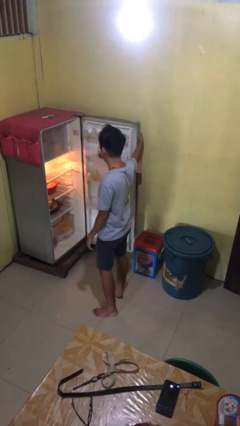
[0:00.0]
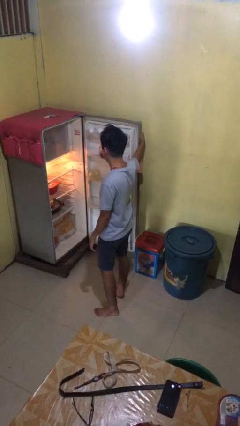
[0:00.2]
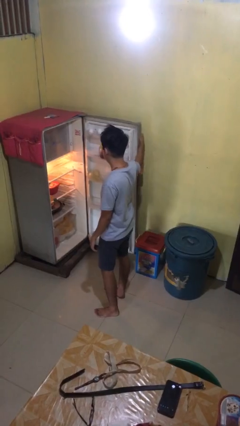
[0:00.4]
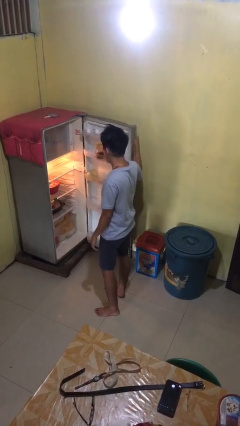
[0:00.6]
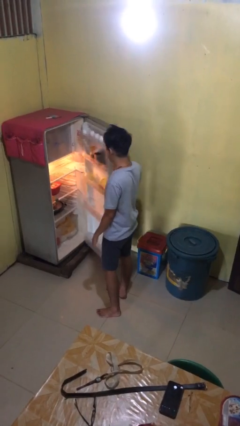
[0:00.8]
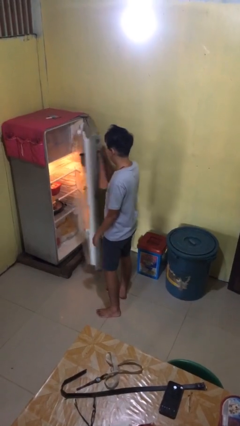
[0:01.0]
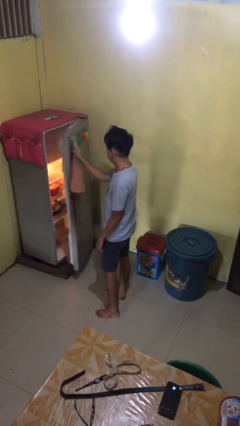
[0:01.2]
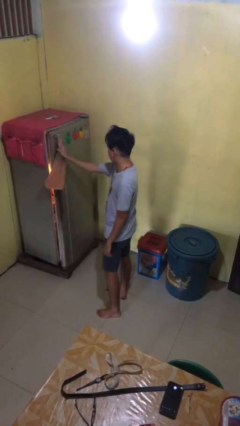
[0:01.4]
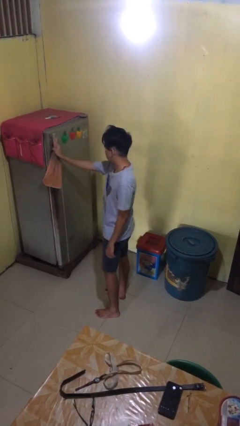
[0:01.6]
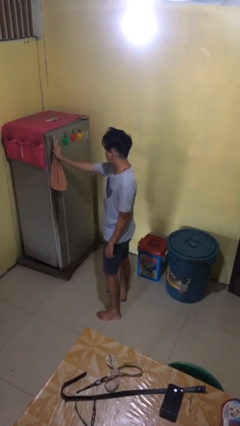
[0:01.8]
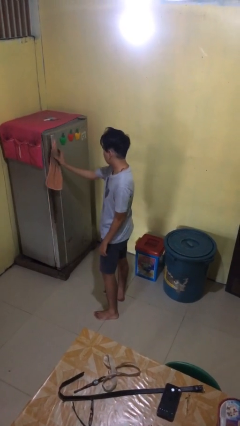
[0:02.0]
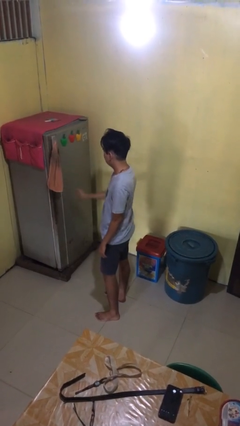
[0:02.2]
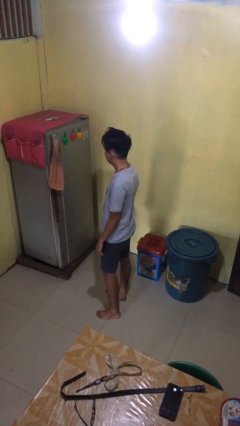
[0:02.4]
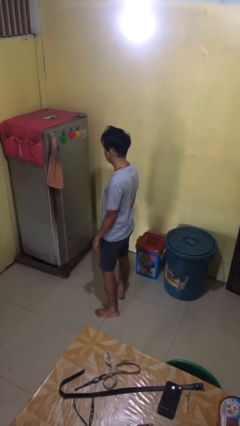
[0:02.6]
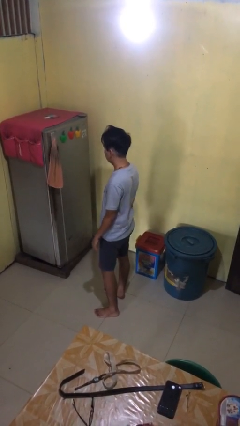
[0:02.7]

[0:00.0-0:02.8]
person closes refrigerator

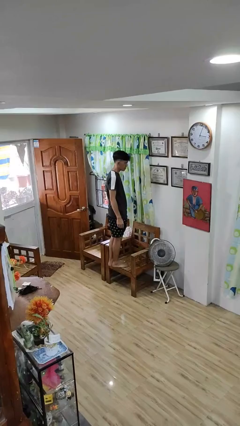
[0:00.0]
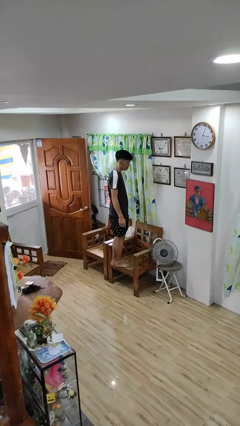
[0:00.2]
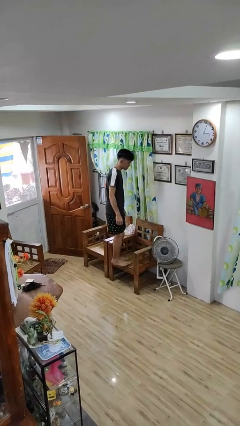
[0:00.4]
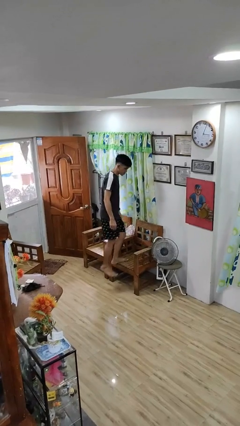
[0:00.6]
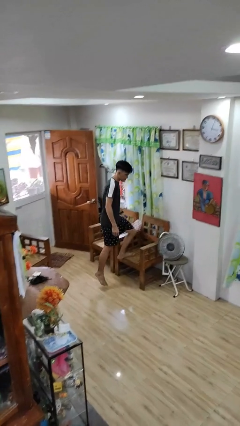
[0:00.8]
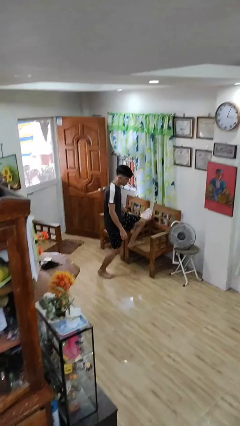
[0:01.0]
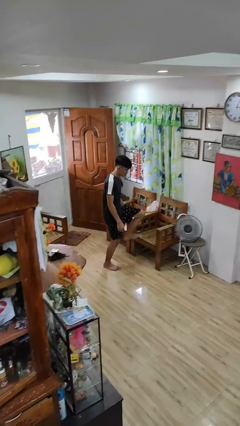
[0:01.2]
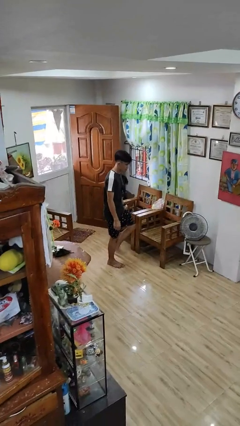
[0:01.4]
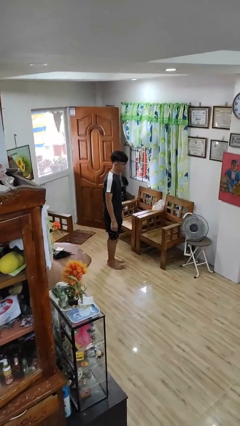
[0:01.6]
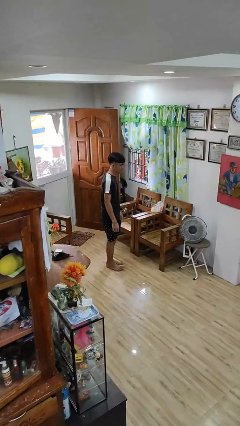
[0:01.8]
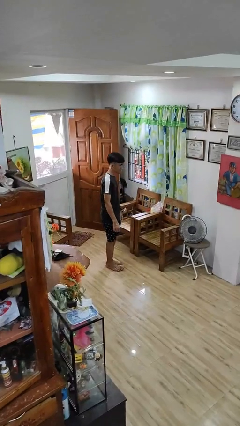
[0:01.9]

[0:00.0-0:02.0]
person climbs off chair

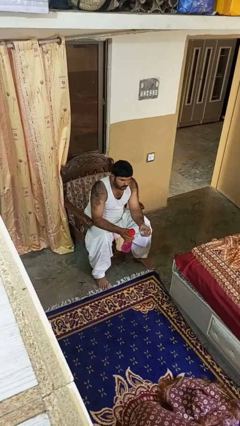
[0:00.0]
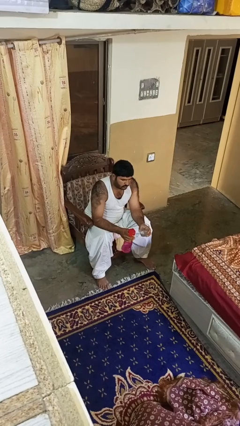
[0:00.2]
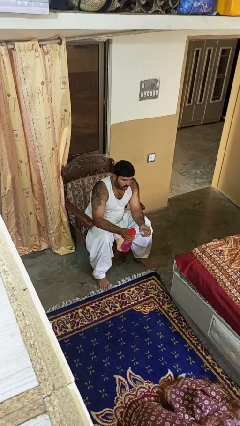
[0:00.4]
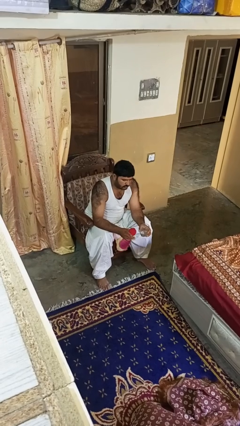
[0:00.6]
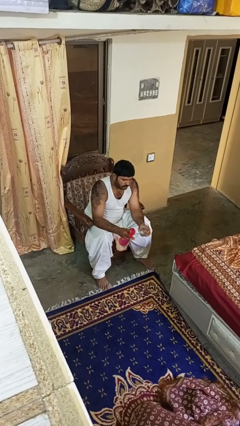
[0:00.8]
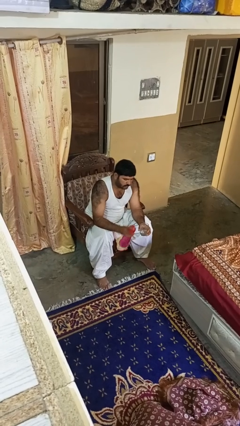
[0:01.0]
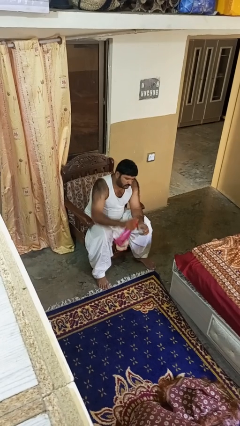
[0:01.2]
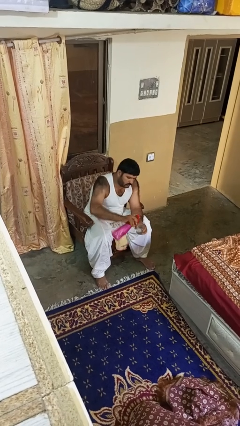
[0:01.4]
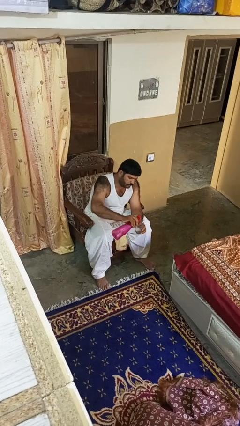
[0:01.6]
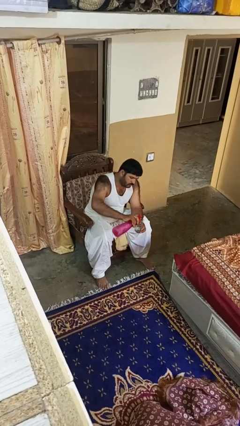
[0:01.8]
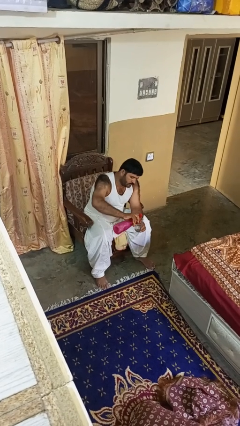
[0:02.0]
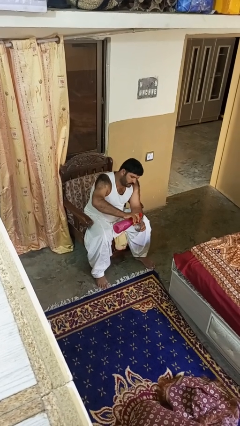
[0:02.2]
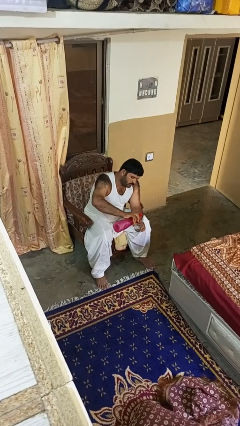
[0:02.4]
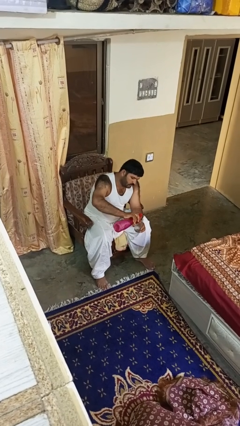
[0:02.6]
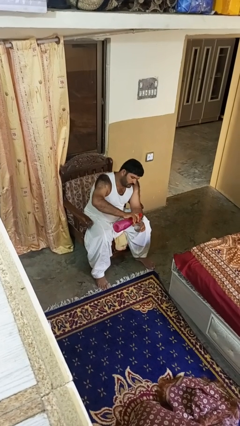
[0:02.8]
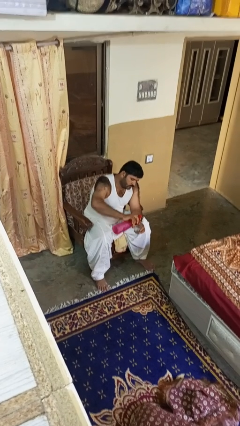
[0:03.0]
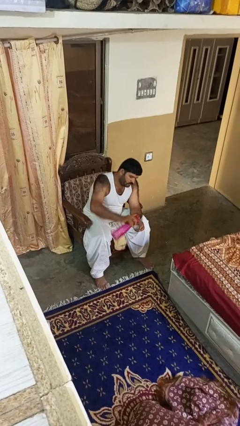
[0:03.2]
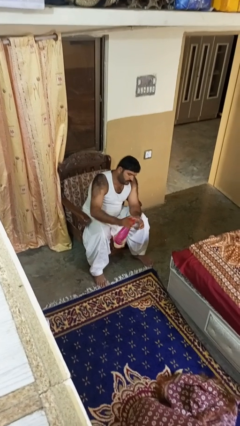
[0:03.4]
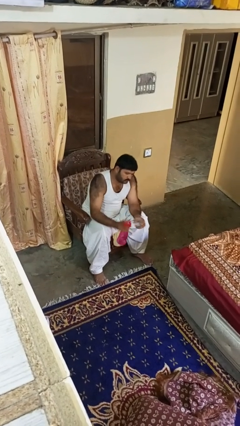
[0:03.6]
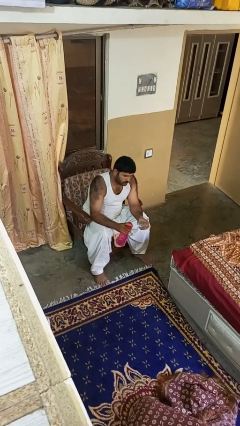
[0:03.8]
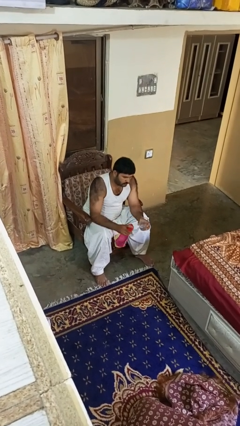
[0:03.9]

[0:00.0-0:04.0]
person pours liquid into cup

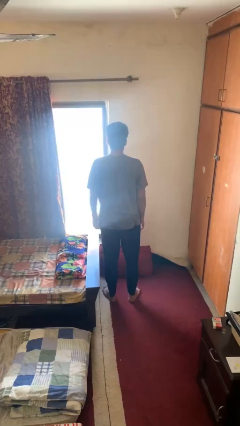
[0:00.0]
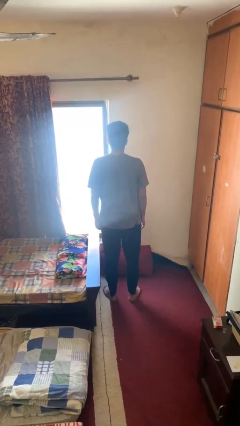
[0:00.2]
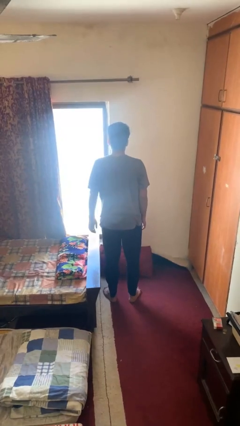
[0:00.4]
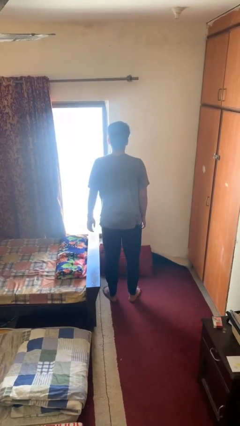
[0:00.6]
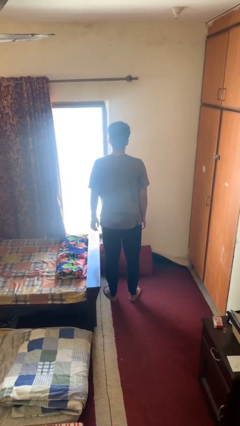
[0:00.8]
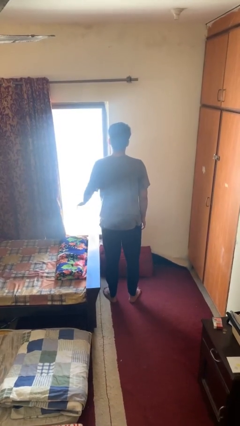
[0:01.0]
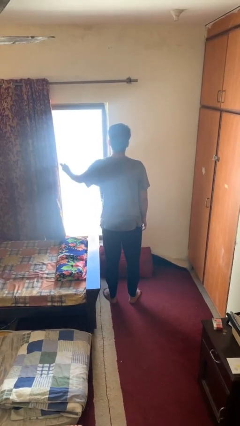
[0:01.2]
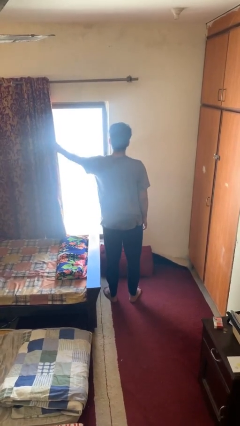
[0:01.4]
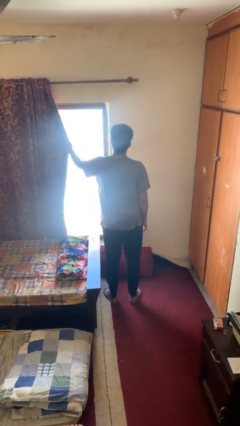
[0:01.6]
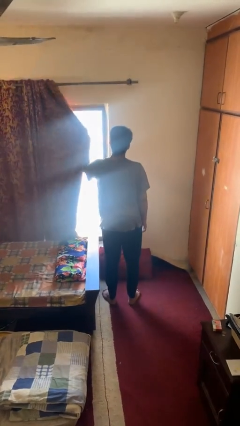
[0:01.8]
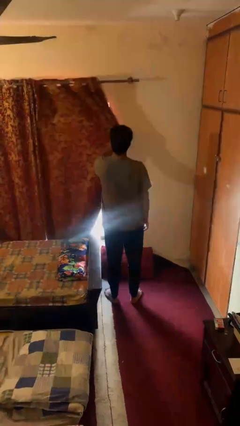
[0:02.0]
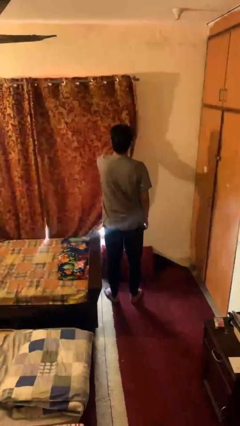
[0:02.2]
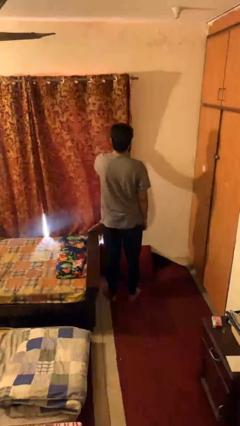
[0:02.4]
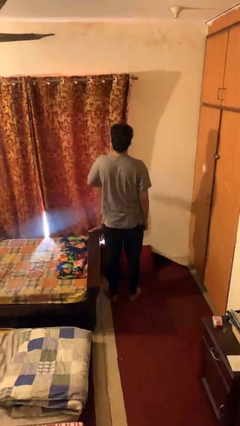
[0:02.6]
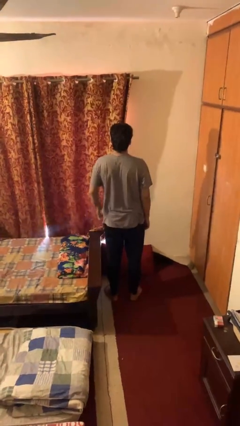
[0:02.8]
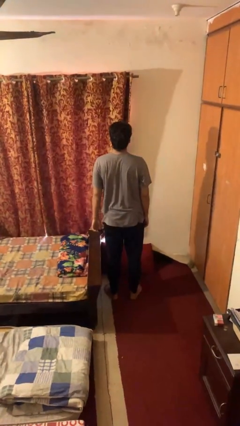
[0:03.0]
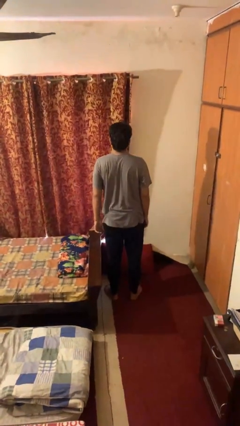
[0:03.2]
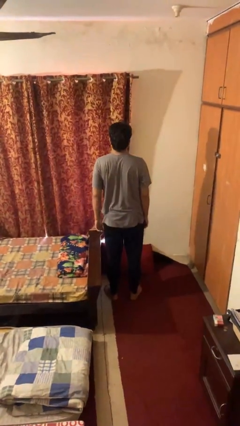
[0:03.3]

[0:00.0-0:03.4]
person closes curtains

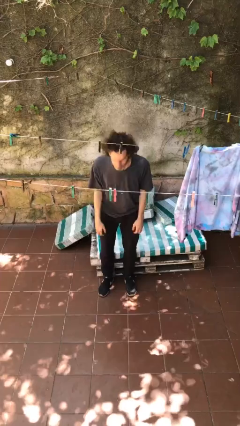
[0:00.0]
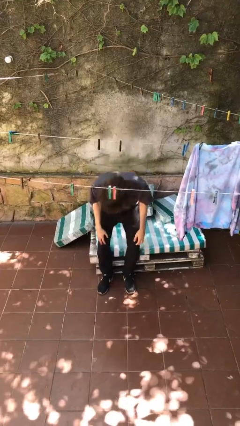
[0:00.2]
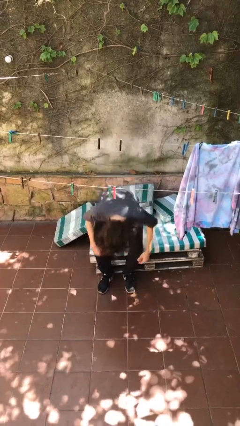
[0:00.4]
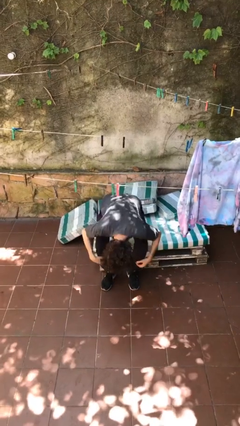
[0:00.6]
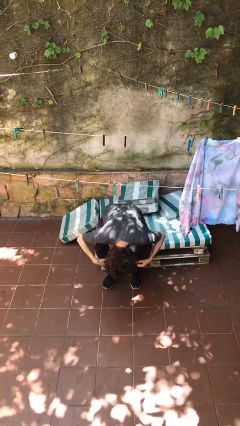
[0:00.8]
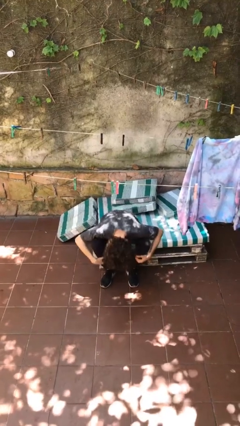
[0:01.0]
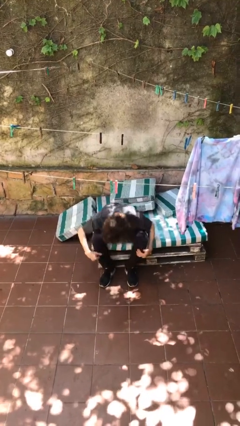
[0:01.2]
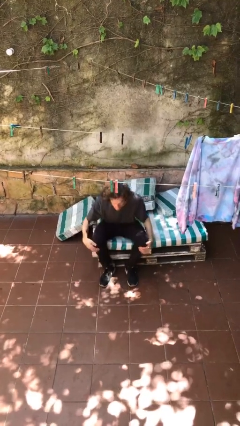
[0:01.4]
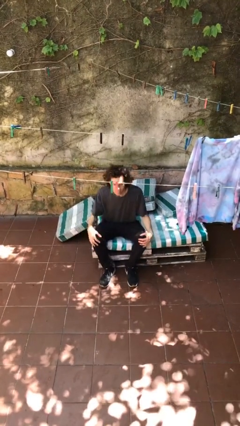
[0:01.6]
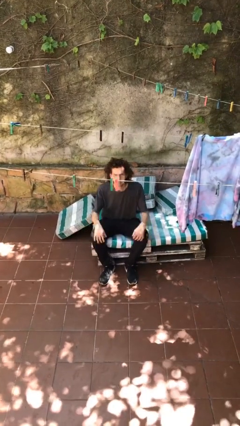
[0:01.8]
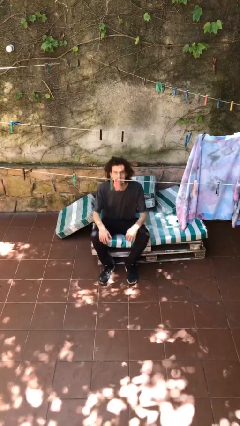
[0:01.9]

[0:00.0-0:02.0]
person sits down

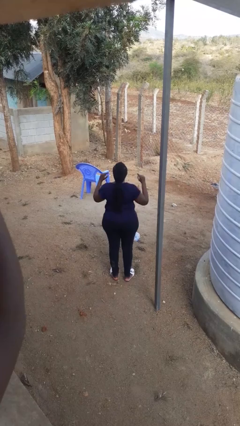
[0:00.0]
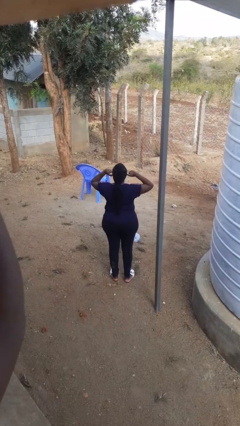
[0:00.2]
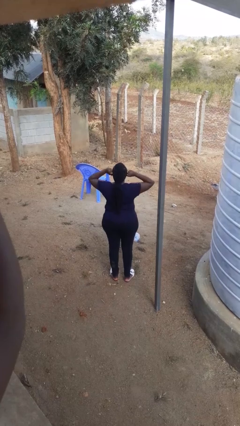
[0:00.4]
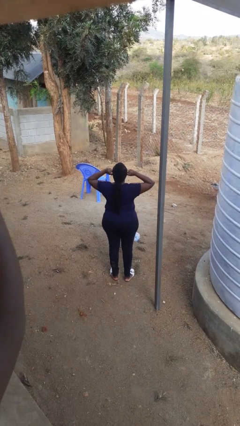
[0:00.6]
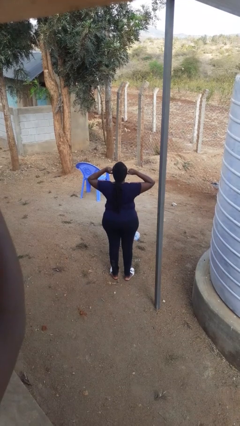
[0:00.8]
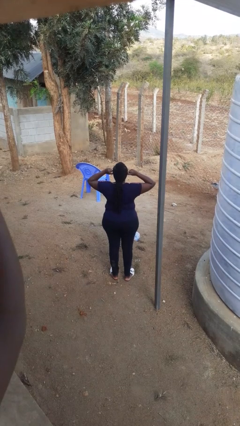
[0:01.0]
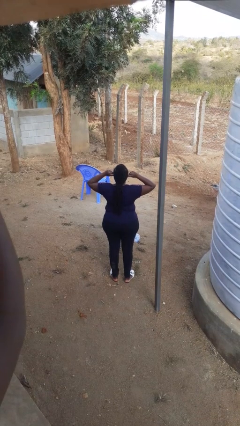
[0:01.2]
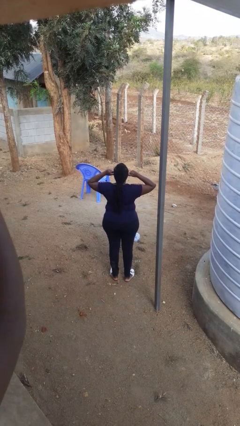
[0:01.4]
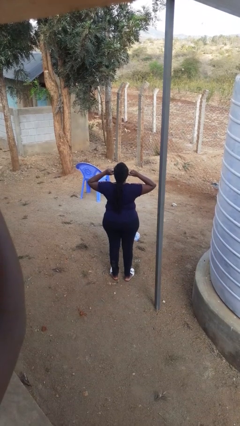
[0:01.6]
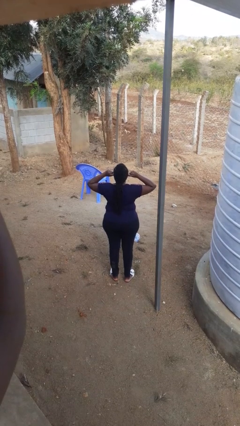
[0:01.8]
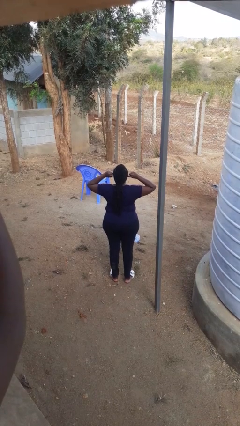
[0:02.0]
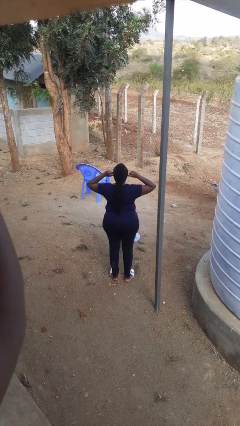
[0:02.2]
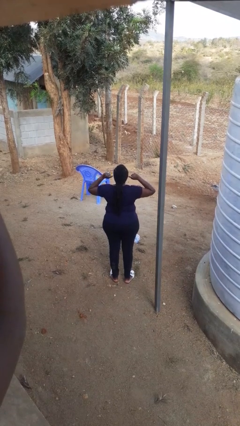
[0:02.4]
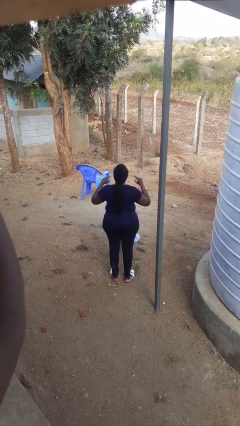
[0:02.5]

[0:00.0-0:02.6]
person puts fingers in ear
